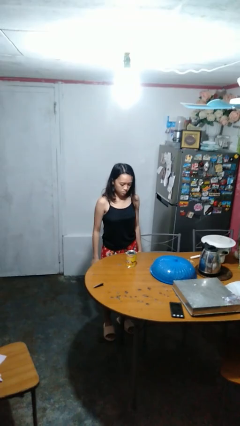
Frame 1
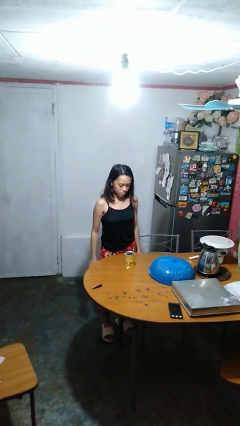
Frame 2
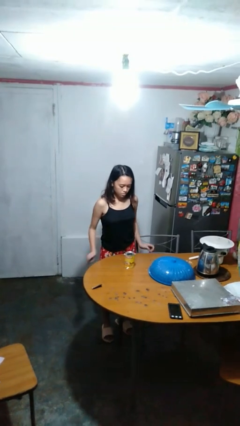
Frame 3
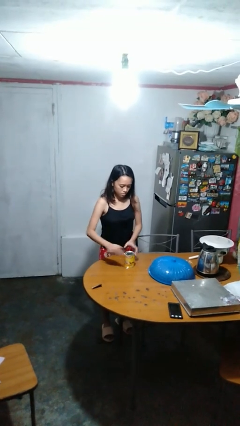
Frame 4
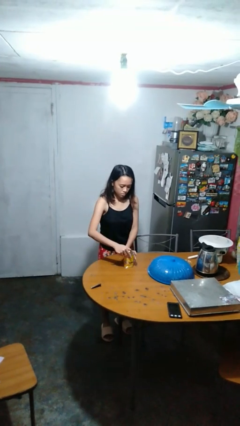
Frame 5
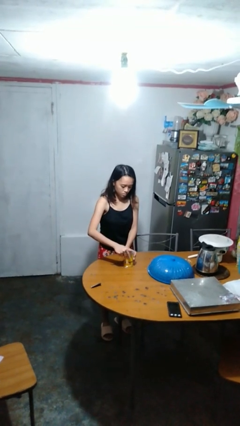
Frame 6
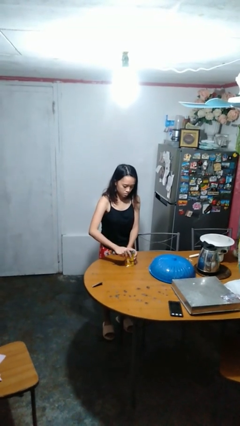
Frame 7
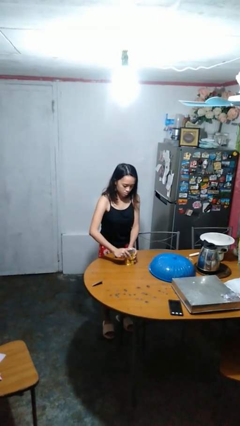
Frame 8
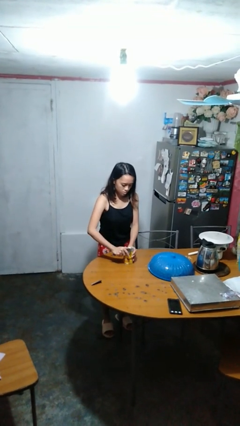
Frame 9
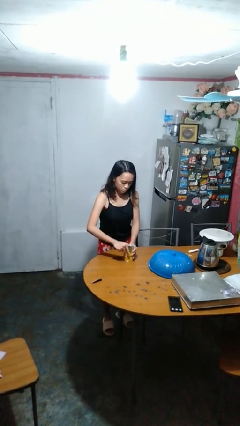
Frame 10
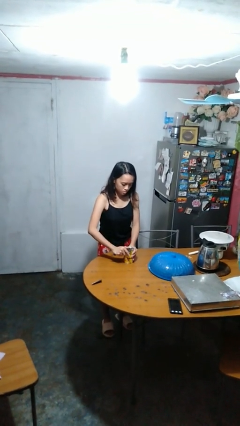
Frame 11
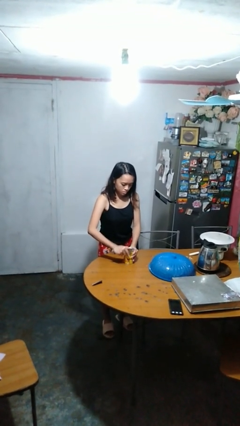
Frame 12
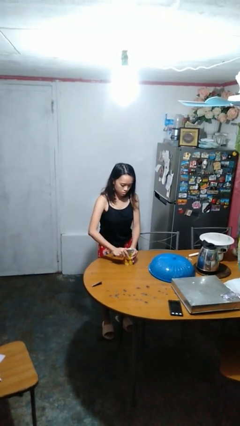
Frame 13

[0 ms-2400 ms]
person opens can with can opener

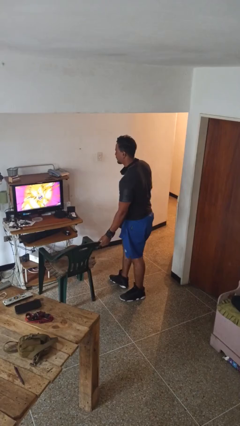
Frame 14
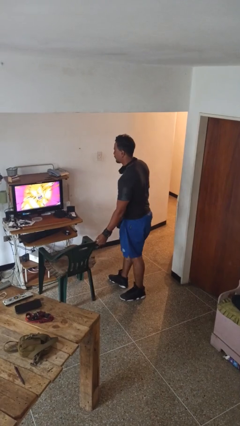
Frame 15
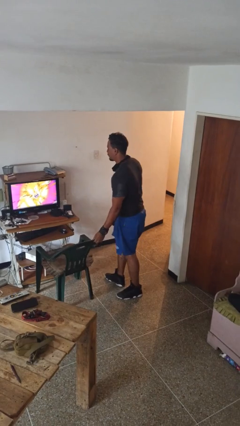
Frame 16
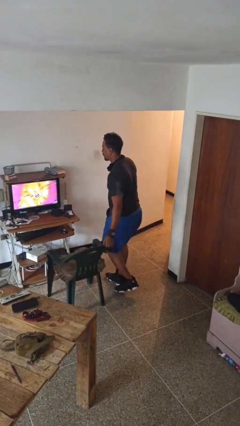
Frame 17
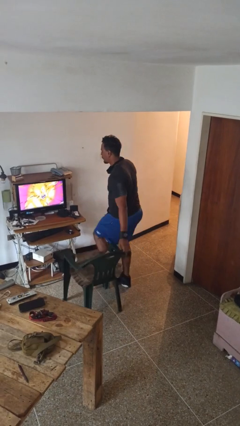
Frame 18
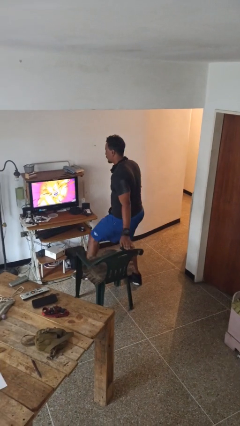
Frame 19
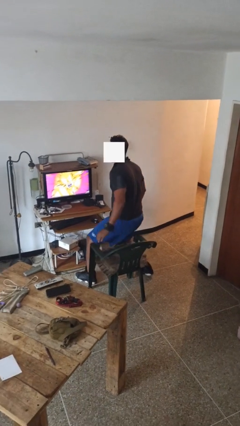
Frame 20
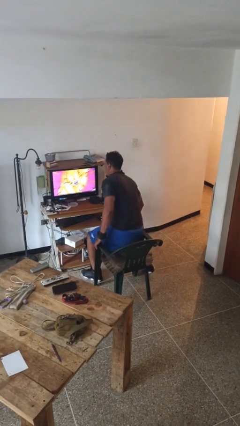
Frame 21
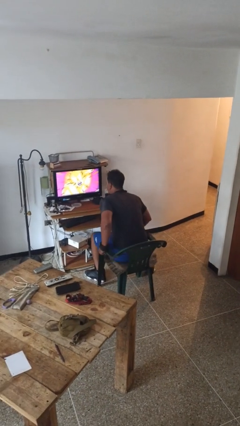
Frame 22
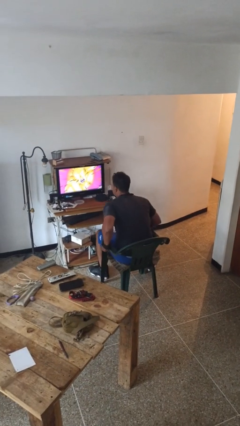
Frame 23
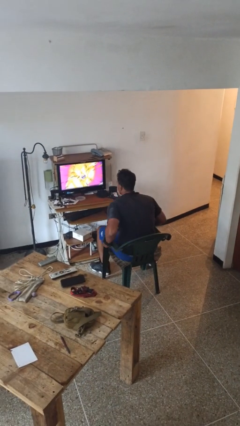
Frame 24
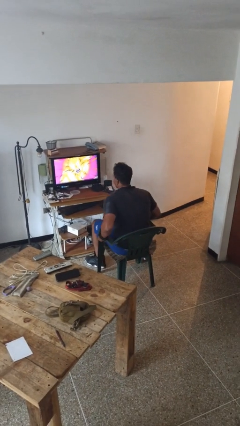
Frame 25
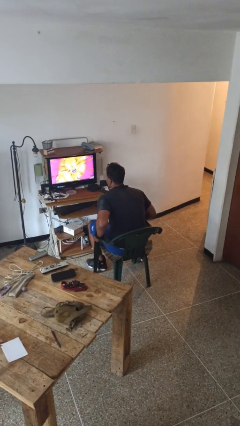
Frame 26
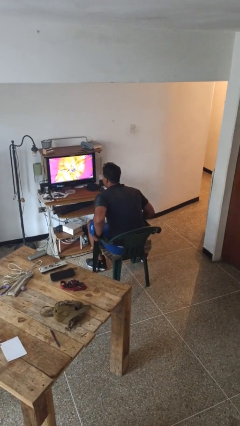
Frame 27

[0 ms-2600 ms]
person sits down

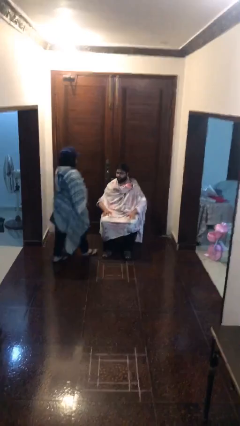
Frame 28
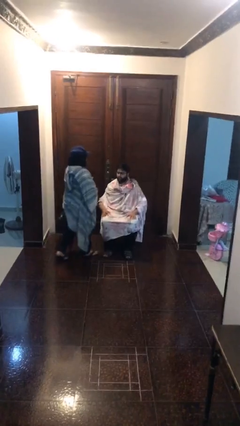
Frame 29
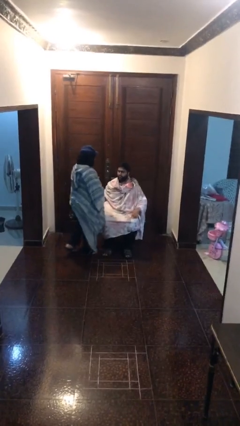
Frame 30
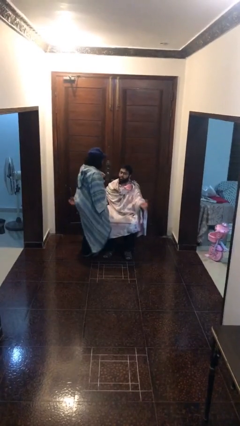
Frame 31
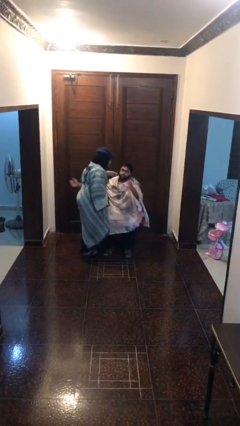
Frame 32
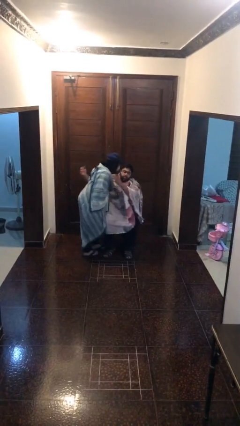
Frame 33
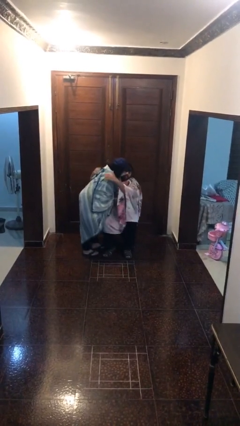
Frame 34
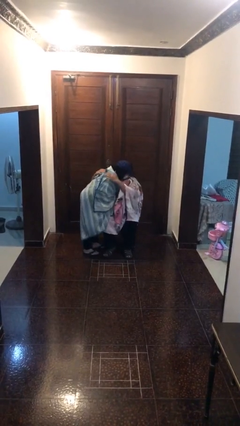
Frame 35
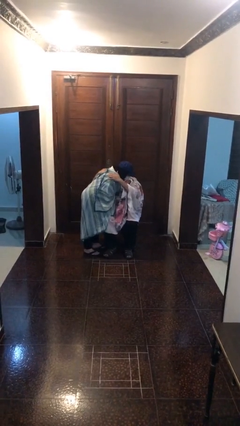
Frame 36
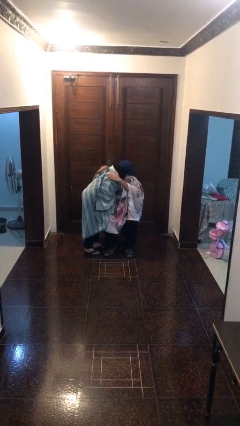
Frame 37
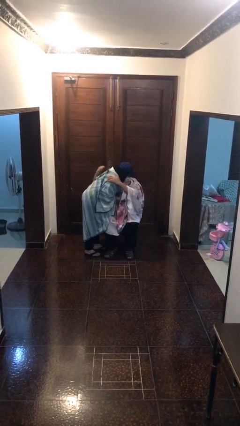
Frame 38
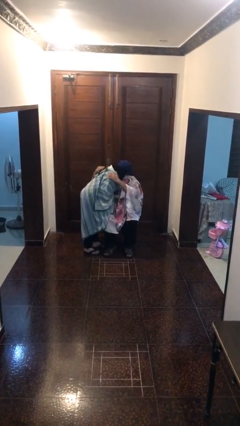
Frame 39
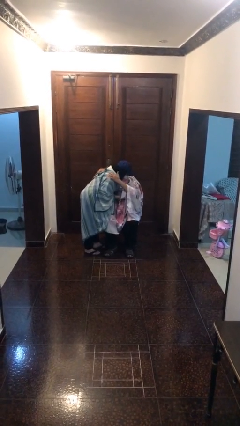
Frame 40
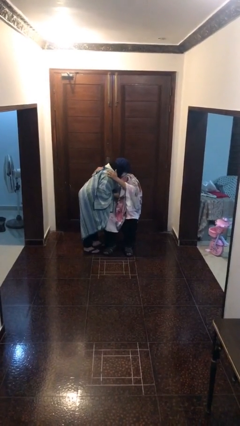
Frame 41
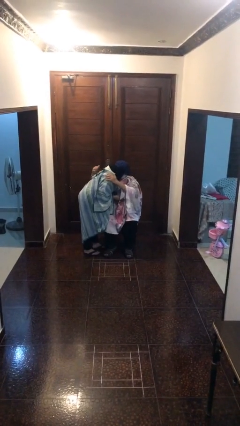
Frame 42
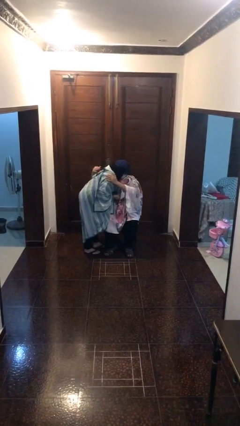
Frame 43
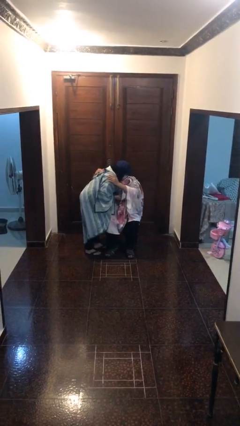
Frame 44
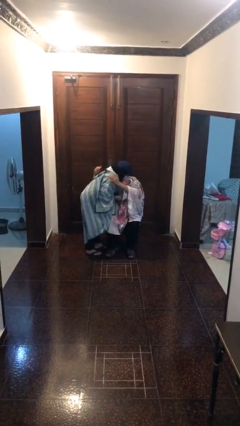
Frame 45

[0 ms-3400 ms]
person embraces person

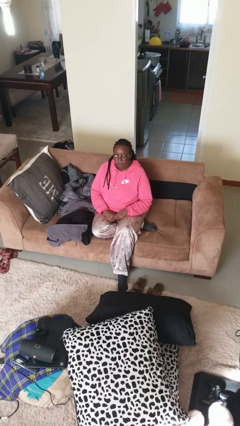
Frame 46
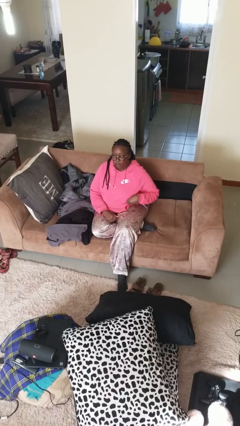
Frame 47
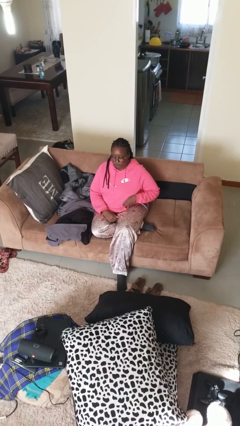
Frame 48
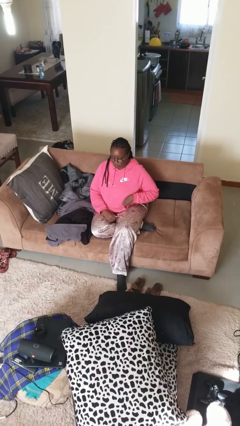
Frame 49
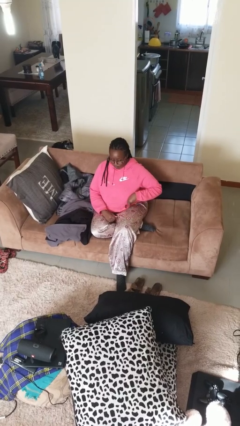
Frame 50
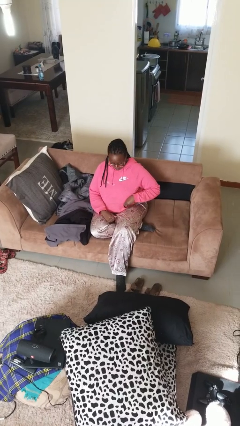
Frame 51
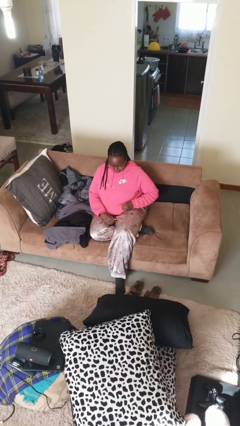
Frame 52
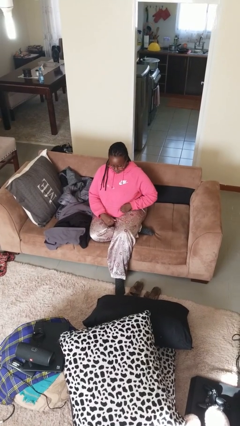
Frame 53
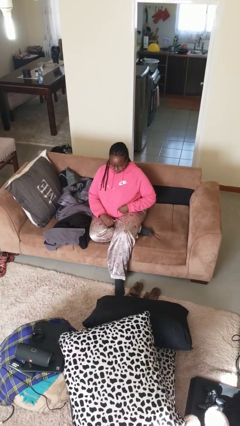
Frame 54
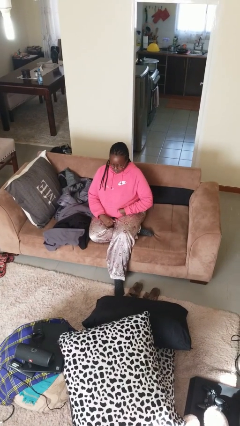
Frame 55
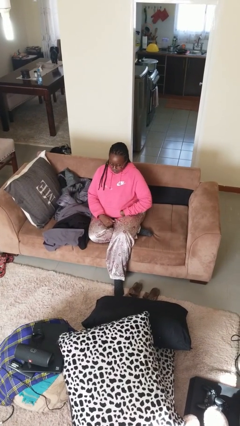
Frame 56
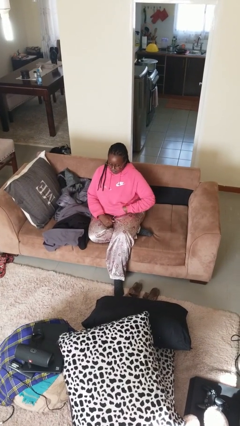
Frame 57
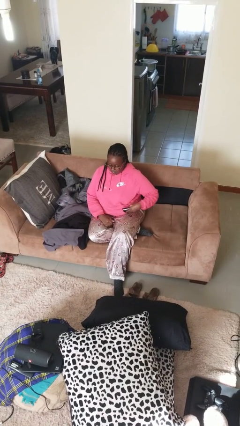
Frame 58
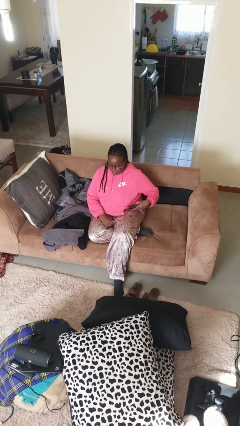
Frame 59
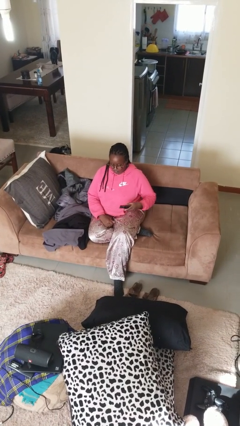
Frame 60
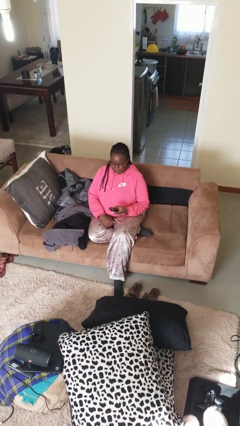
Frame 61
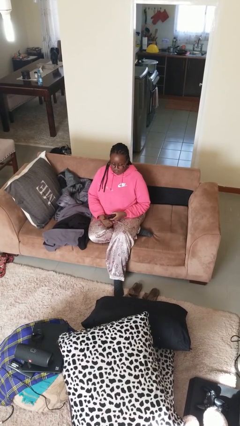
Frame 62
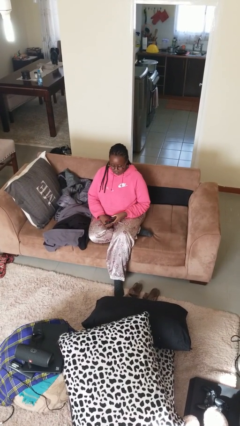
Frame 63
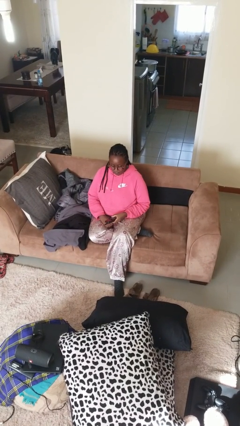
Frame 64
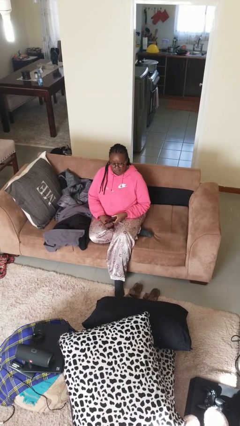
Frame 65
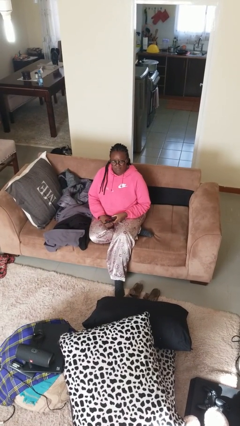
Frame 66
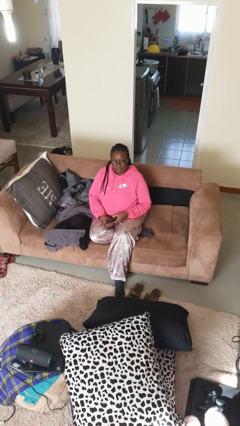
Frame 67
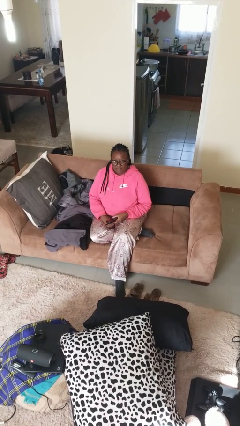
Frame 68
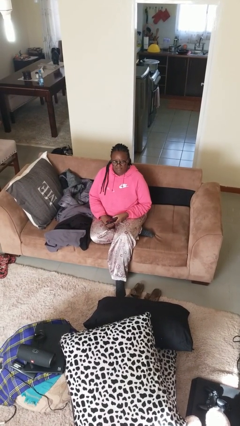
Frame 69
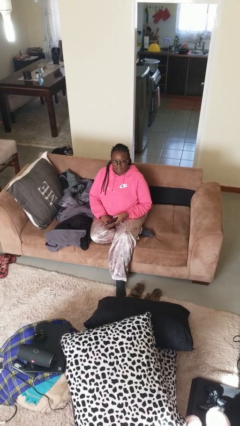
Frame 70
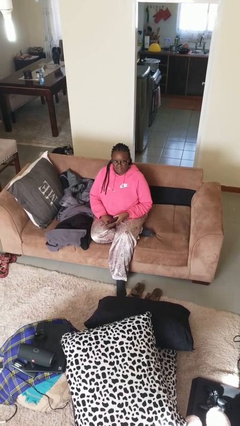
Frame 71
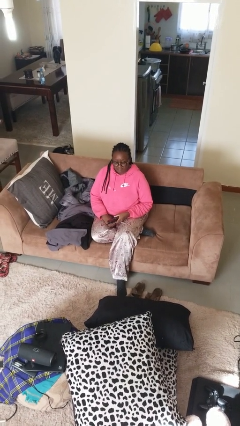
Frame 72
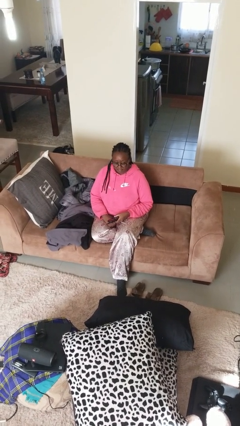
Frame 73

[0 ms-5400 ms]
person takes phone from pocket

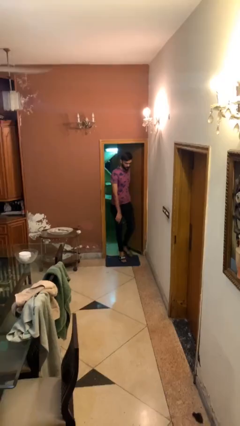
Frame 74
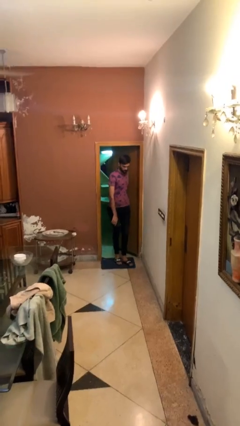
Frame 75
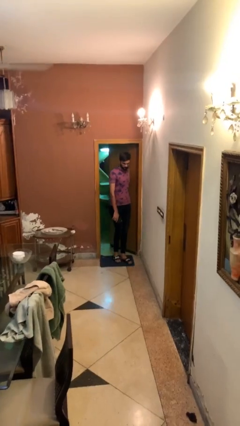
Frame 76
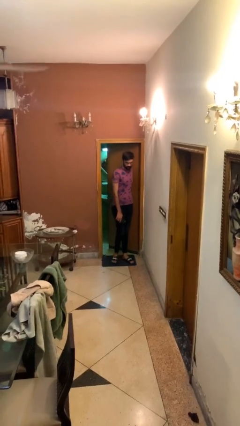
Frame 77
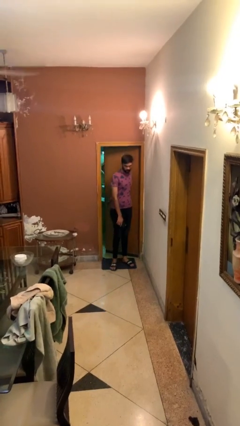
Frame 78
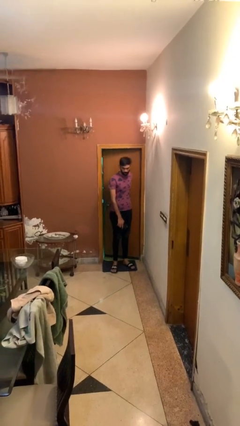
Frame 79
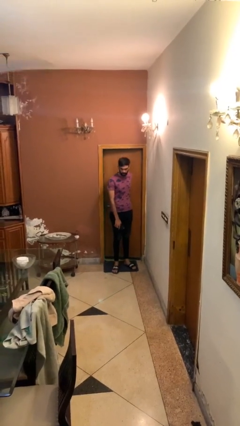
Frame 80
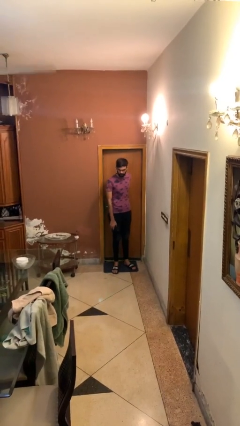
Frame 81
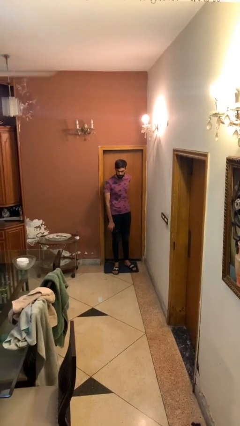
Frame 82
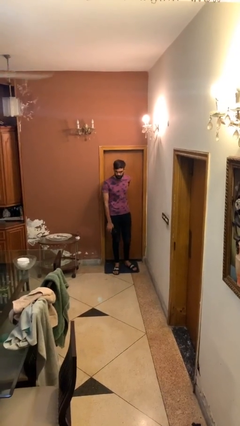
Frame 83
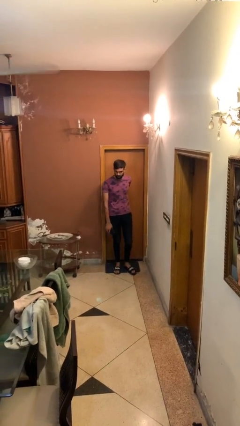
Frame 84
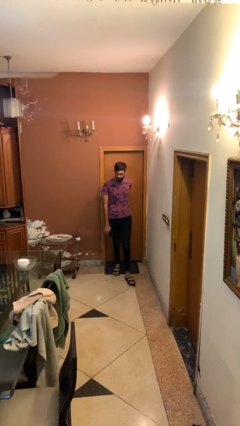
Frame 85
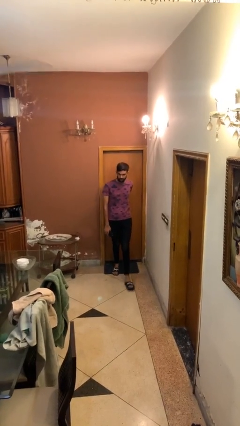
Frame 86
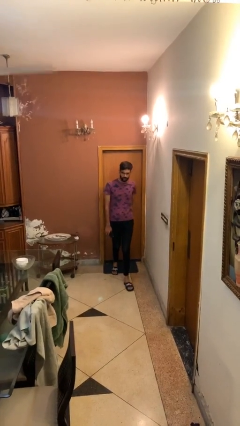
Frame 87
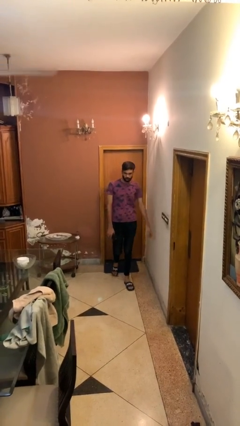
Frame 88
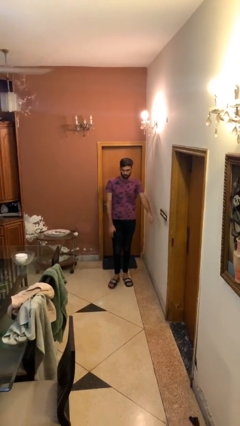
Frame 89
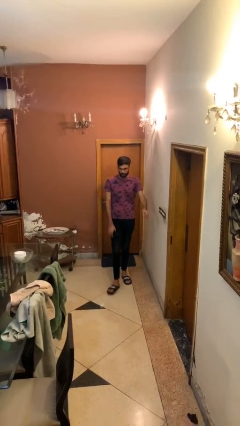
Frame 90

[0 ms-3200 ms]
person closes facility door

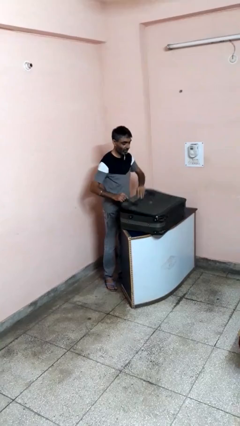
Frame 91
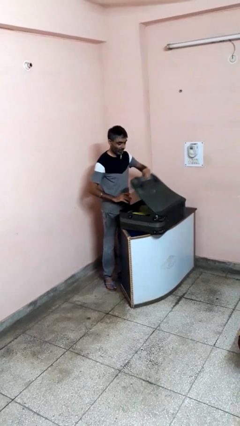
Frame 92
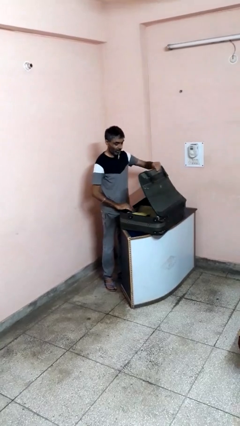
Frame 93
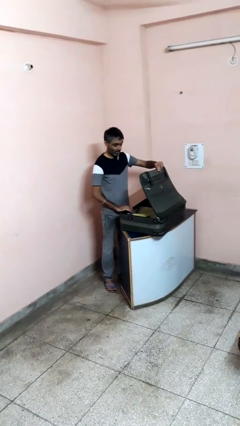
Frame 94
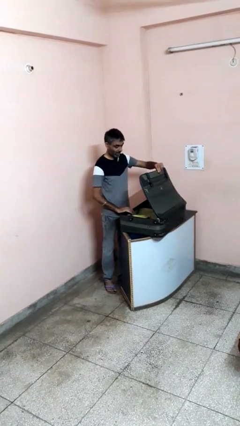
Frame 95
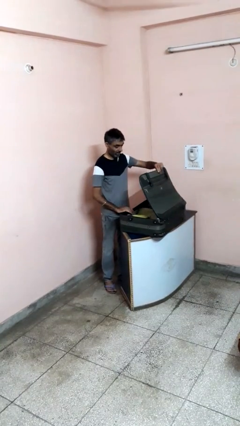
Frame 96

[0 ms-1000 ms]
person opens suitcase
